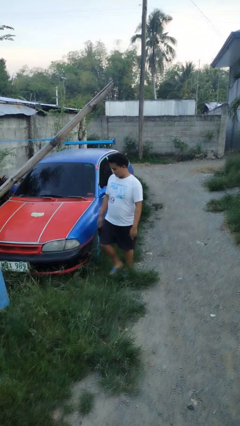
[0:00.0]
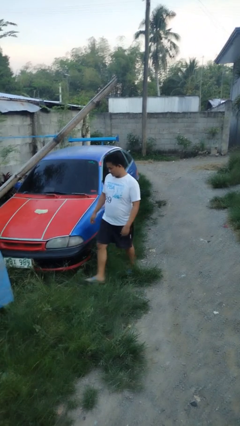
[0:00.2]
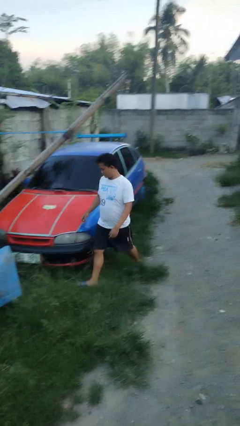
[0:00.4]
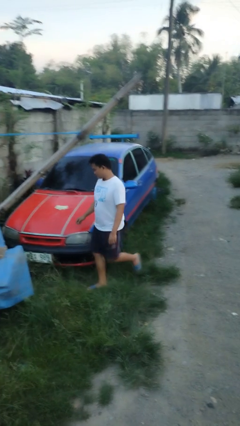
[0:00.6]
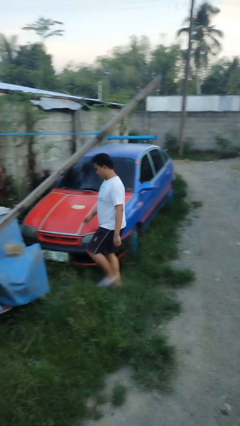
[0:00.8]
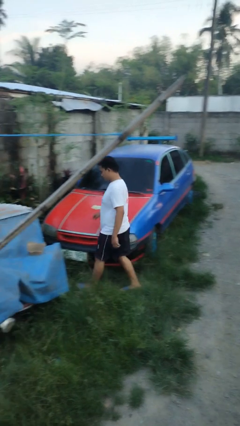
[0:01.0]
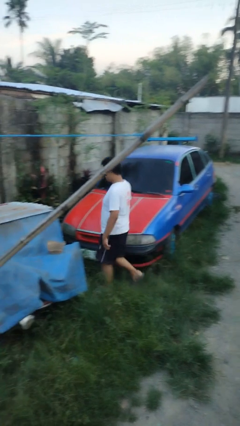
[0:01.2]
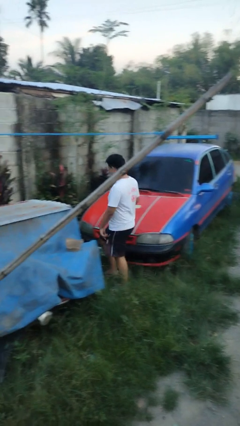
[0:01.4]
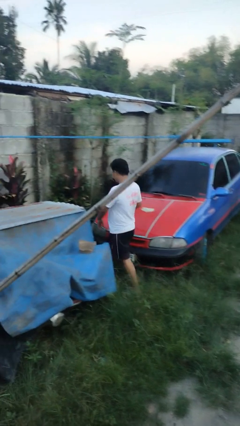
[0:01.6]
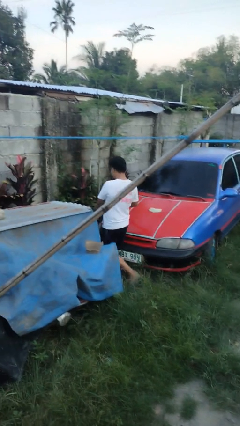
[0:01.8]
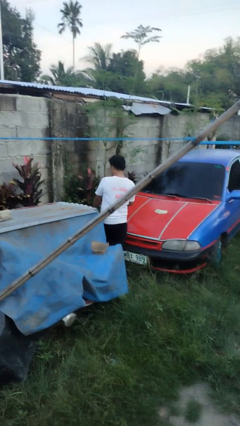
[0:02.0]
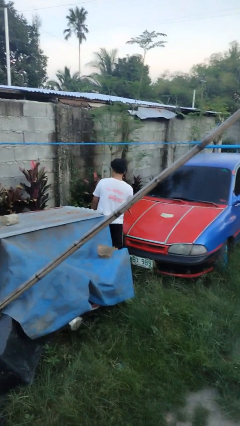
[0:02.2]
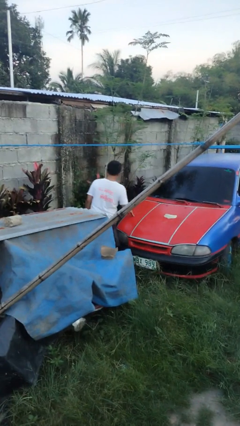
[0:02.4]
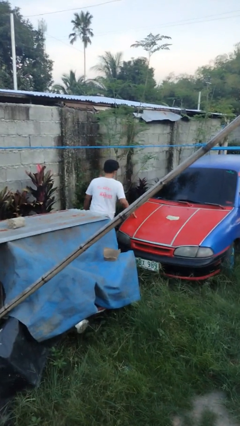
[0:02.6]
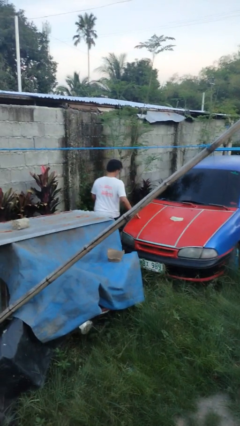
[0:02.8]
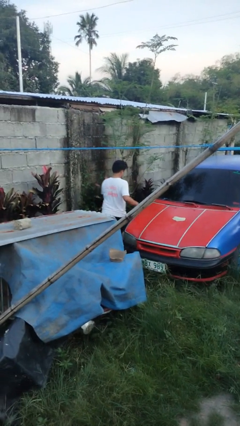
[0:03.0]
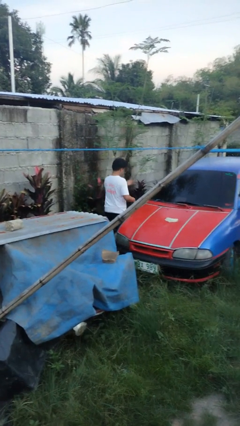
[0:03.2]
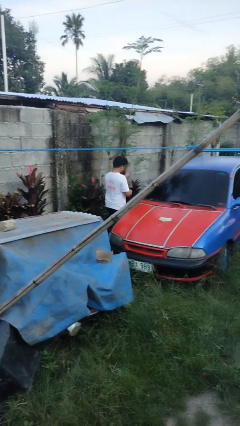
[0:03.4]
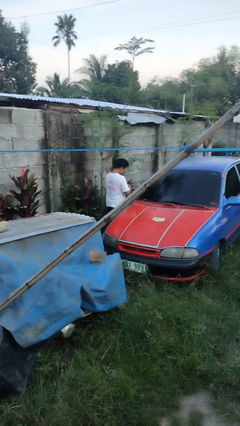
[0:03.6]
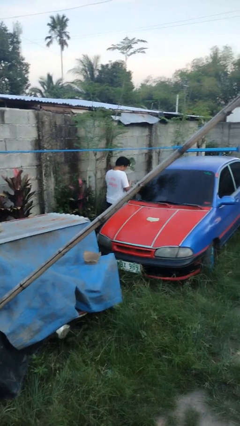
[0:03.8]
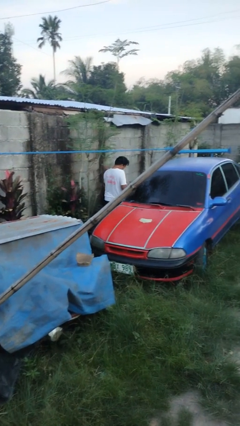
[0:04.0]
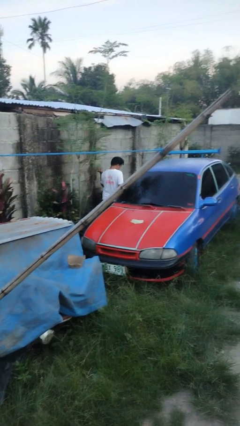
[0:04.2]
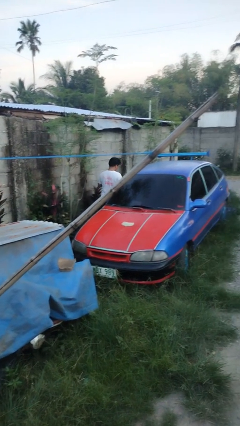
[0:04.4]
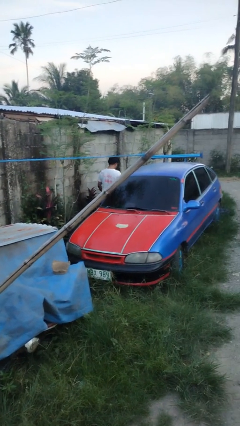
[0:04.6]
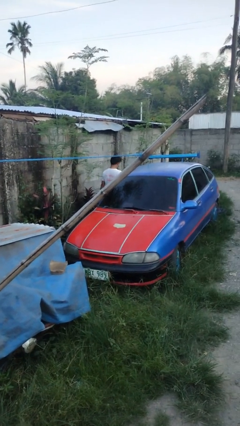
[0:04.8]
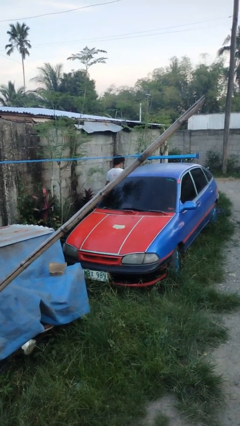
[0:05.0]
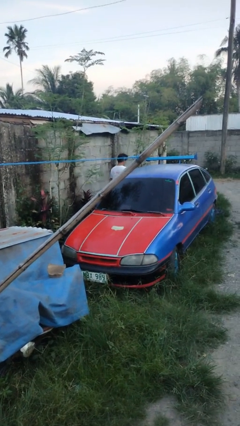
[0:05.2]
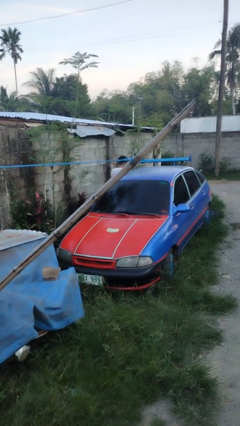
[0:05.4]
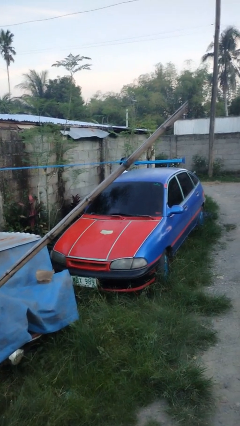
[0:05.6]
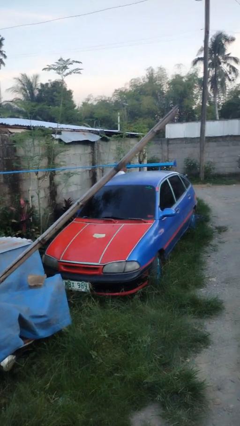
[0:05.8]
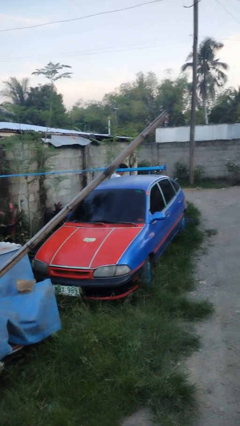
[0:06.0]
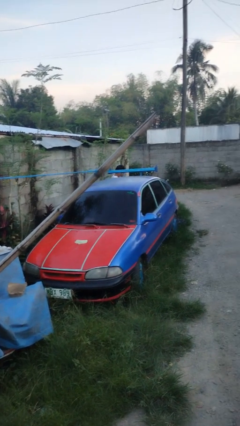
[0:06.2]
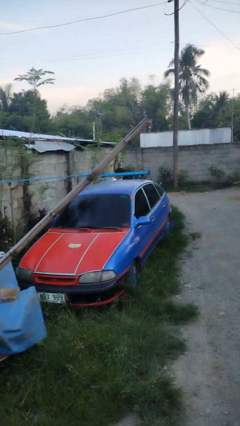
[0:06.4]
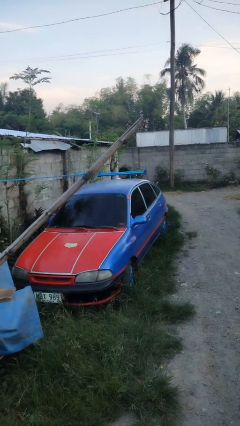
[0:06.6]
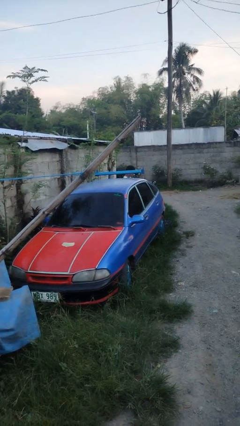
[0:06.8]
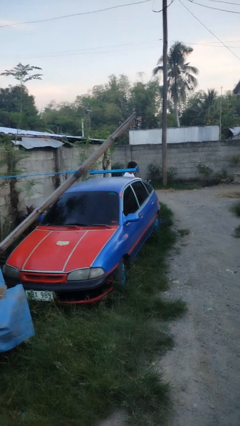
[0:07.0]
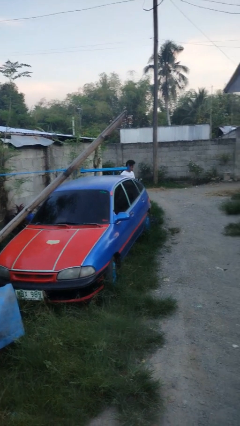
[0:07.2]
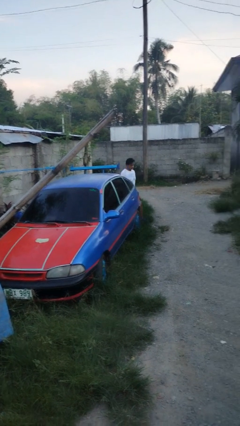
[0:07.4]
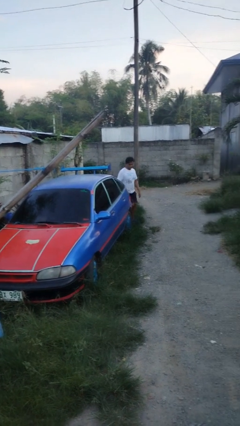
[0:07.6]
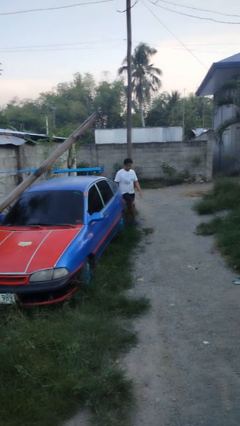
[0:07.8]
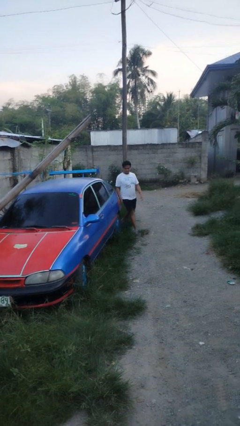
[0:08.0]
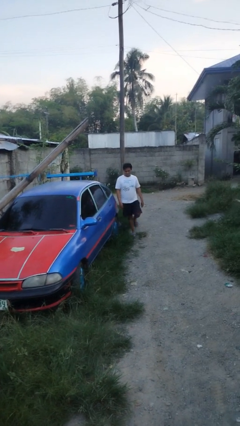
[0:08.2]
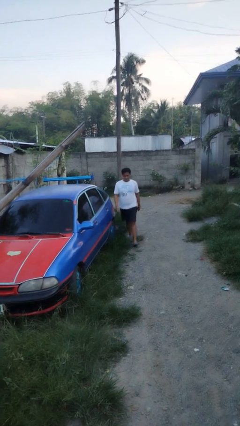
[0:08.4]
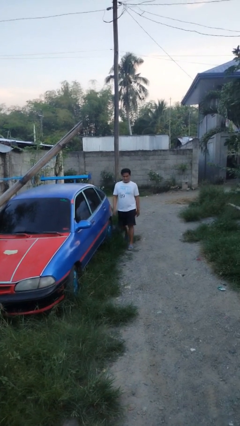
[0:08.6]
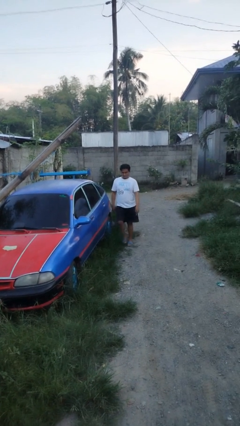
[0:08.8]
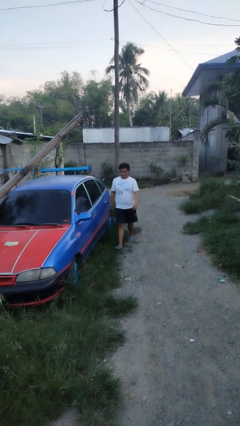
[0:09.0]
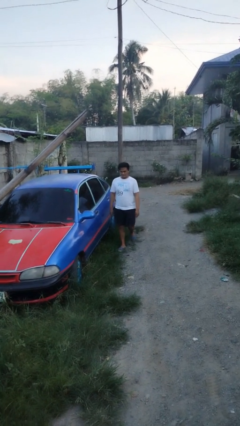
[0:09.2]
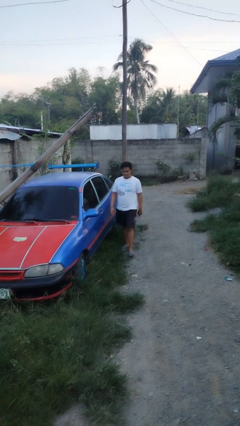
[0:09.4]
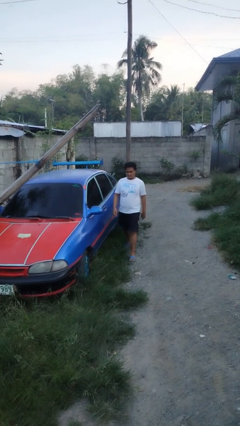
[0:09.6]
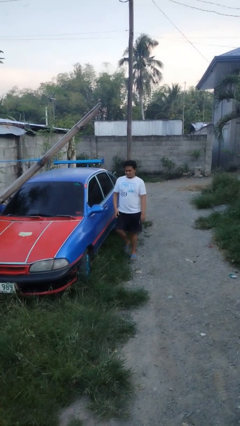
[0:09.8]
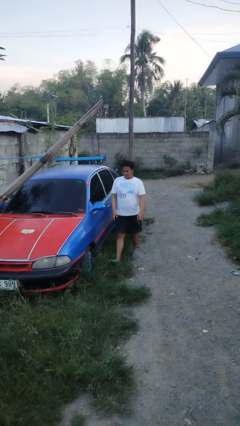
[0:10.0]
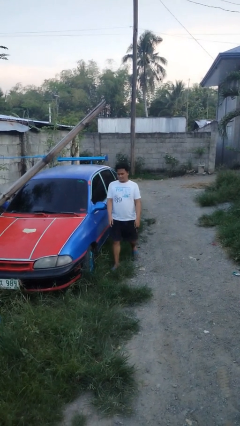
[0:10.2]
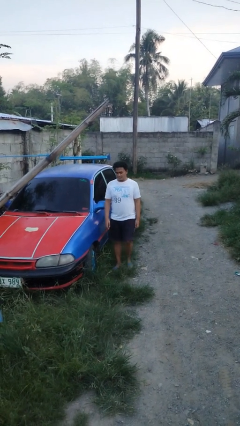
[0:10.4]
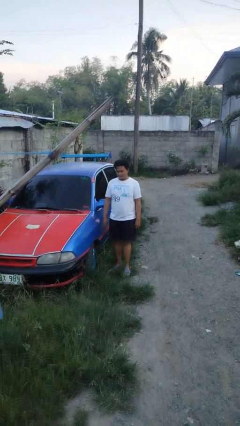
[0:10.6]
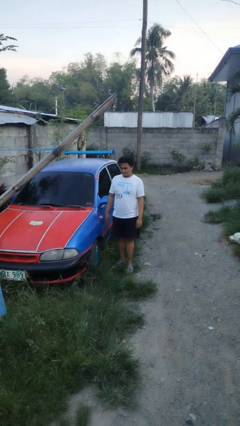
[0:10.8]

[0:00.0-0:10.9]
person walks around car

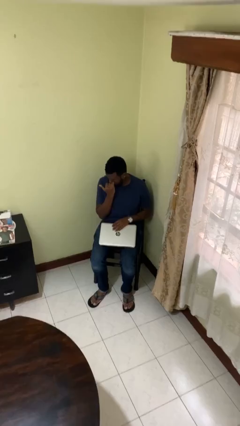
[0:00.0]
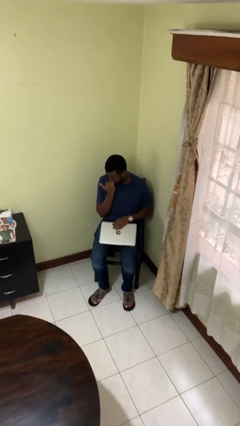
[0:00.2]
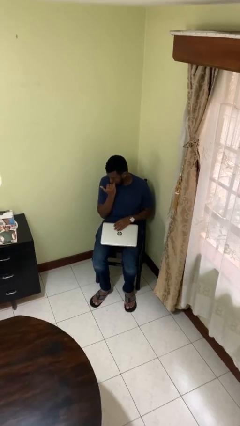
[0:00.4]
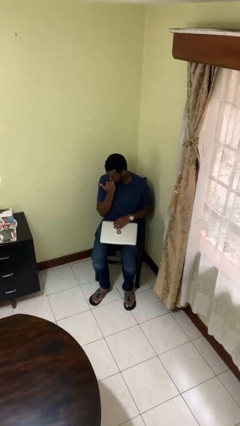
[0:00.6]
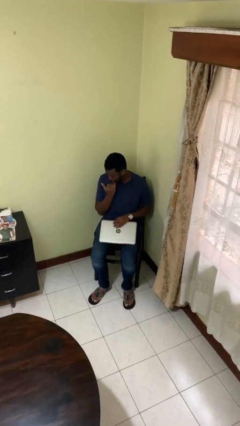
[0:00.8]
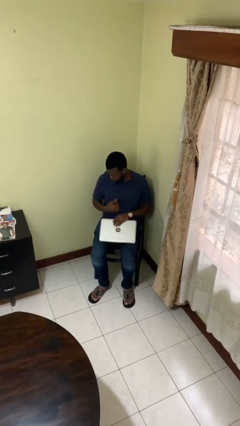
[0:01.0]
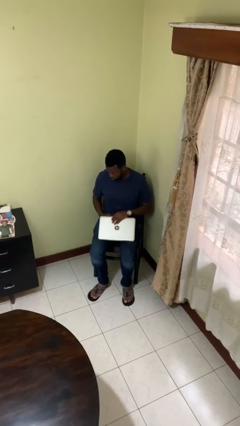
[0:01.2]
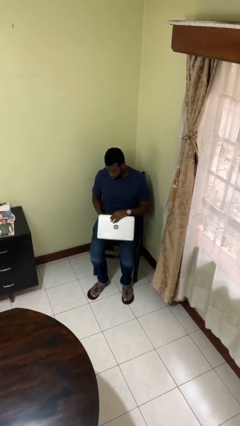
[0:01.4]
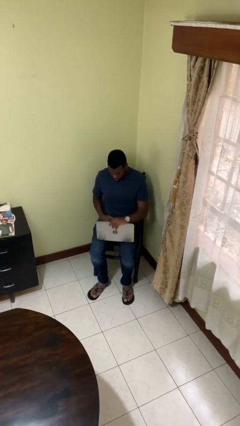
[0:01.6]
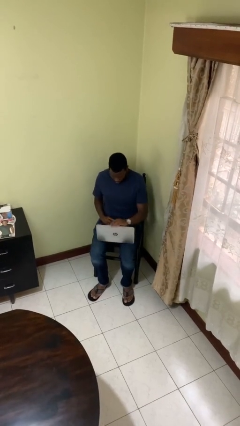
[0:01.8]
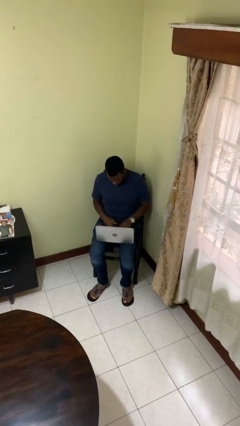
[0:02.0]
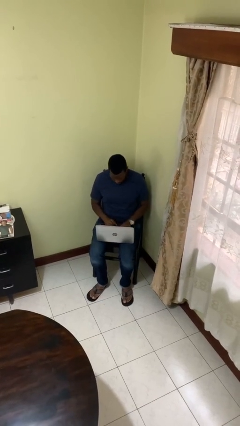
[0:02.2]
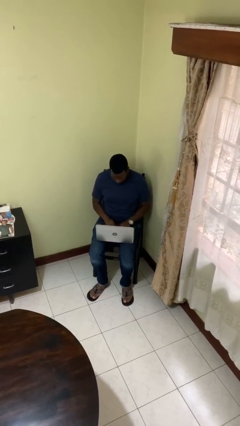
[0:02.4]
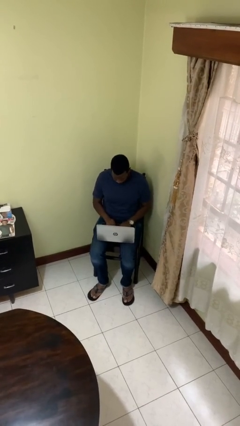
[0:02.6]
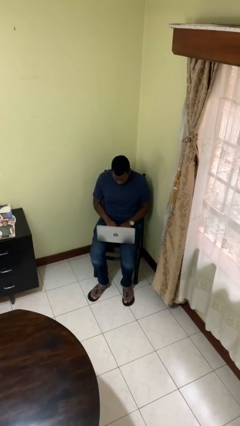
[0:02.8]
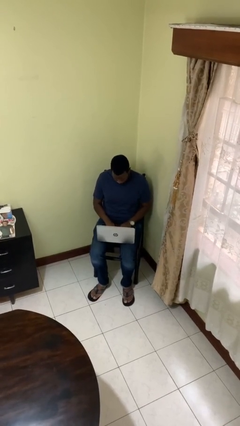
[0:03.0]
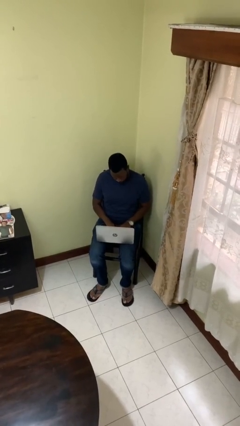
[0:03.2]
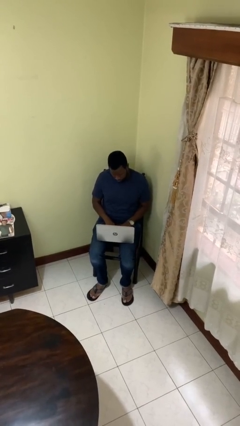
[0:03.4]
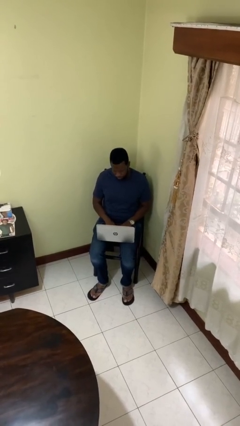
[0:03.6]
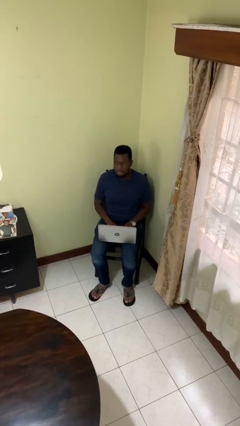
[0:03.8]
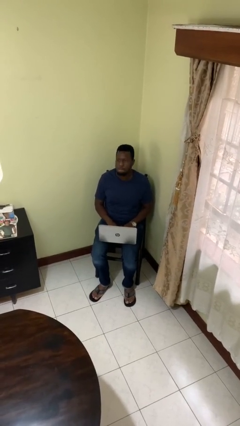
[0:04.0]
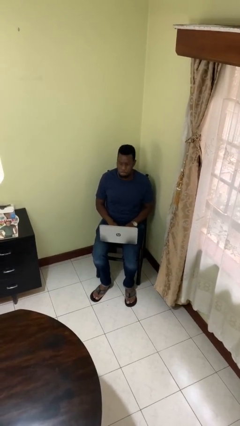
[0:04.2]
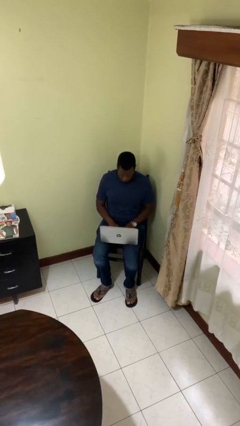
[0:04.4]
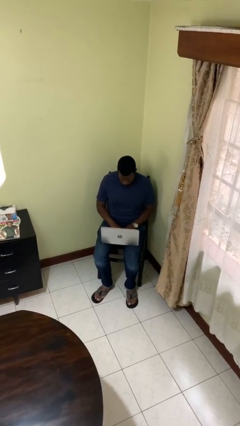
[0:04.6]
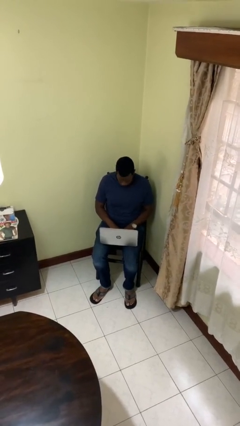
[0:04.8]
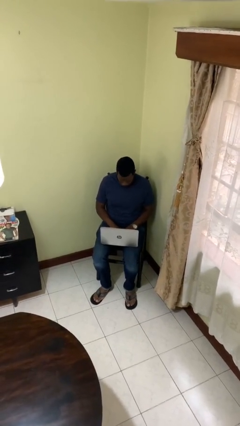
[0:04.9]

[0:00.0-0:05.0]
person interacts with laptop

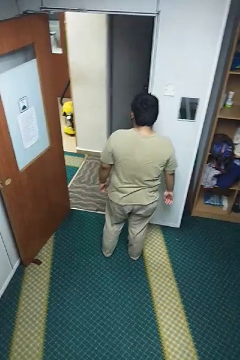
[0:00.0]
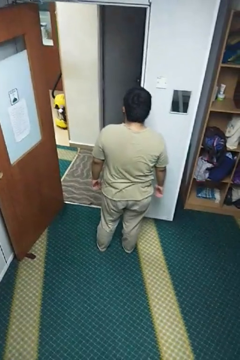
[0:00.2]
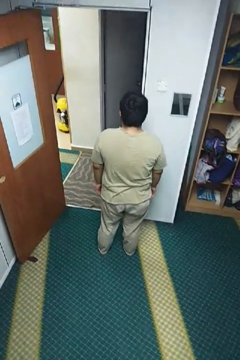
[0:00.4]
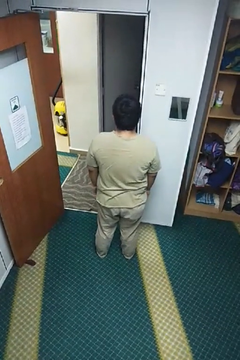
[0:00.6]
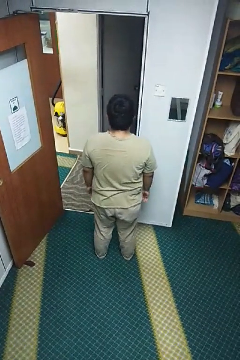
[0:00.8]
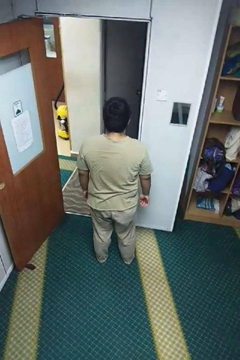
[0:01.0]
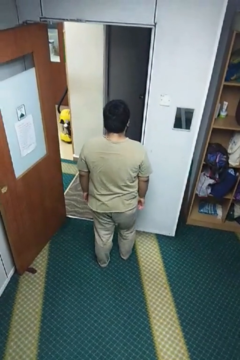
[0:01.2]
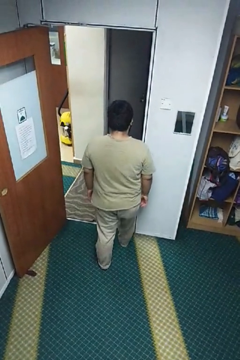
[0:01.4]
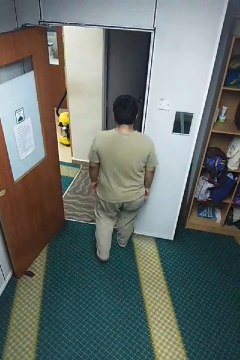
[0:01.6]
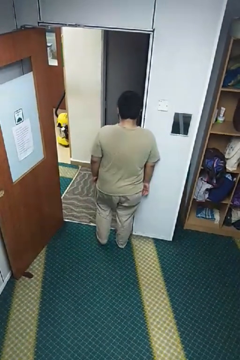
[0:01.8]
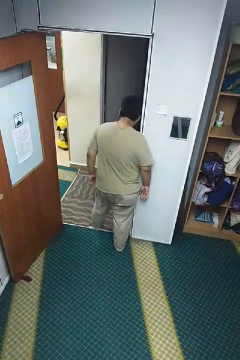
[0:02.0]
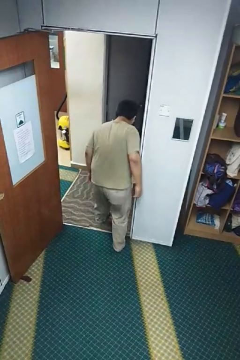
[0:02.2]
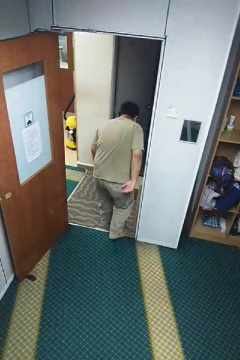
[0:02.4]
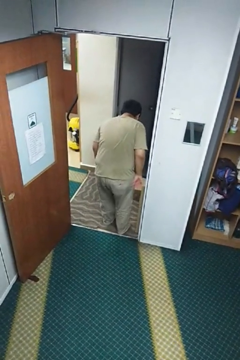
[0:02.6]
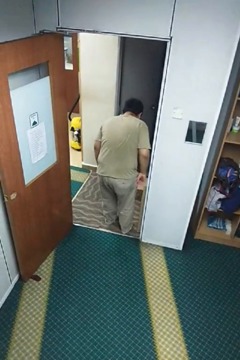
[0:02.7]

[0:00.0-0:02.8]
person bumps into wall
